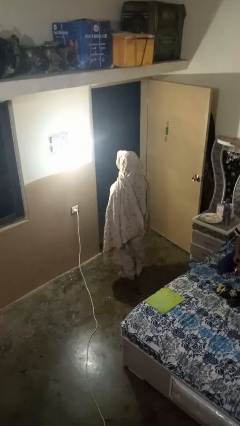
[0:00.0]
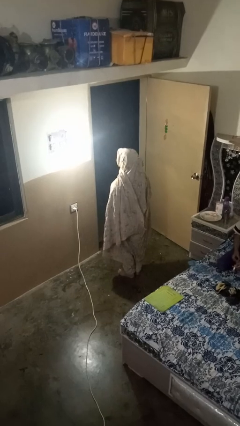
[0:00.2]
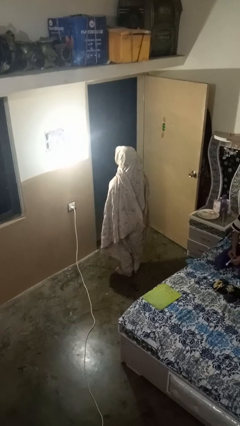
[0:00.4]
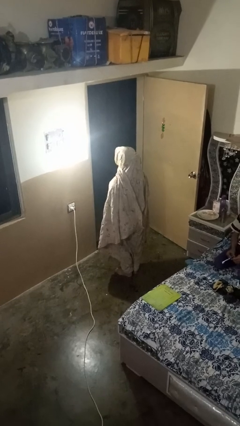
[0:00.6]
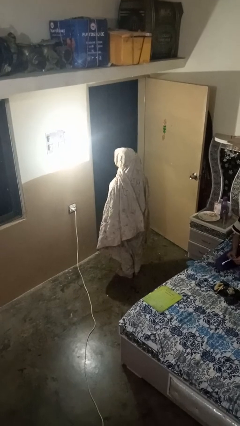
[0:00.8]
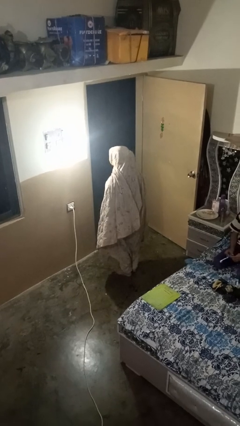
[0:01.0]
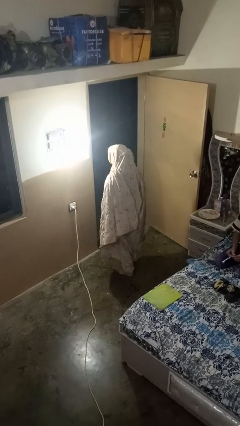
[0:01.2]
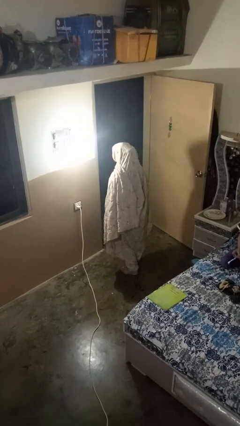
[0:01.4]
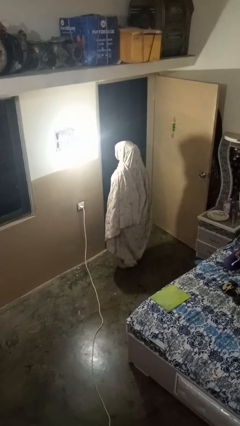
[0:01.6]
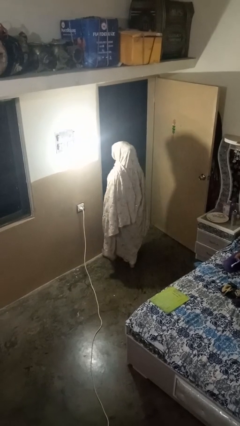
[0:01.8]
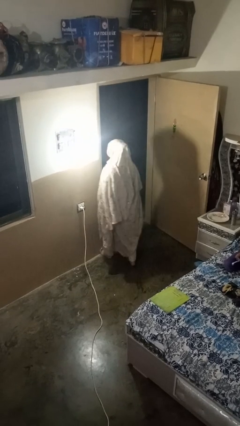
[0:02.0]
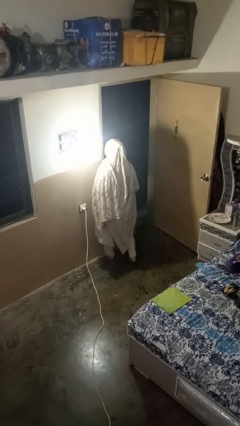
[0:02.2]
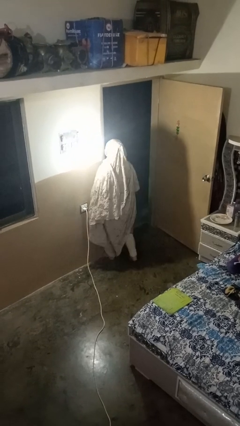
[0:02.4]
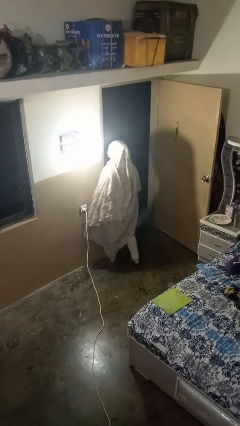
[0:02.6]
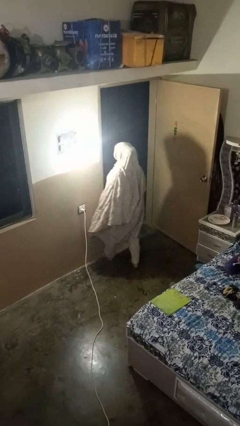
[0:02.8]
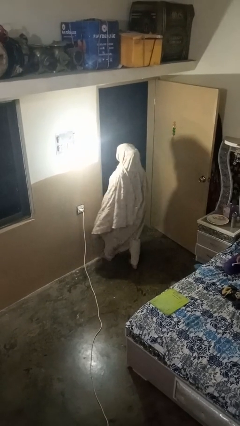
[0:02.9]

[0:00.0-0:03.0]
person bumps into wall

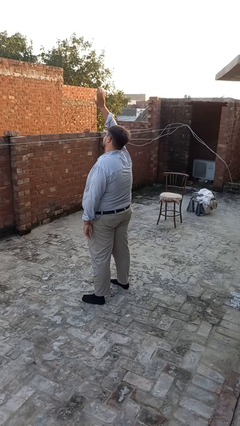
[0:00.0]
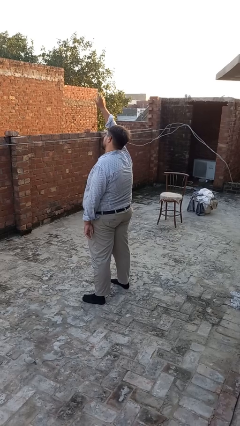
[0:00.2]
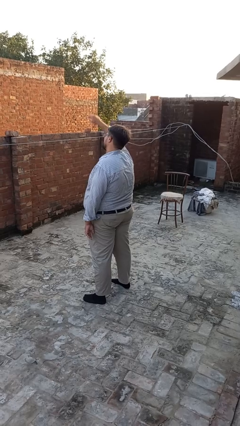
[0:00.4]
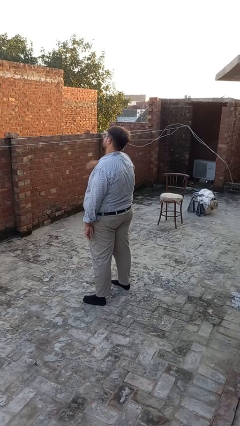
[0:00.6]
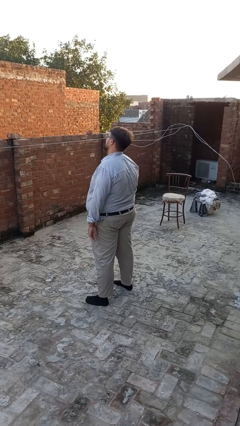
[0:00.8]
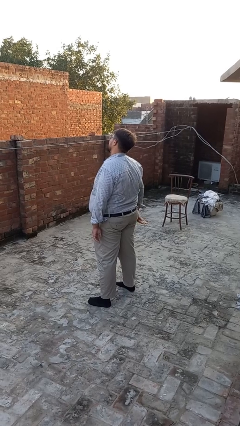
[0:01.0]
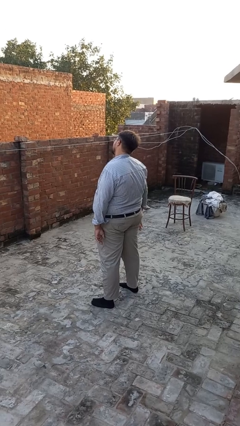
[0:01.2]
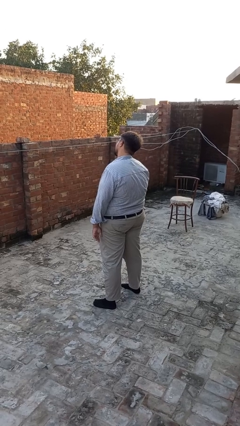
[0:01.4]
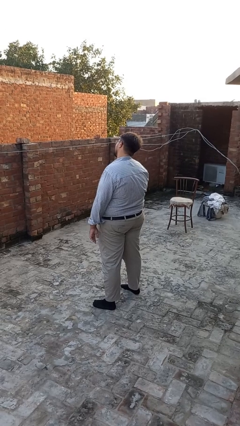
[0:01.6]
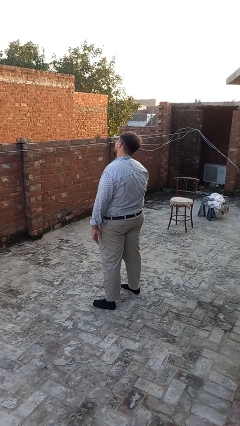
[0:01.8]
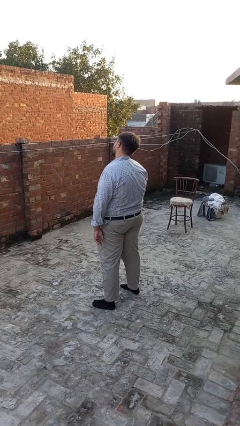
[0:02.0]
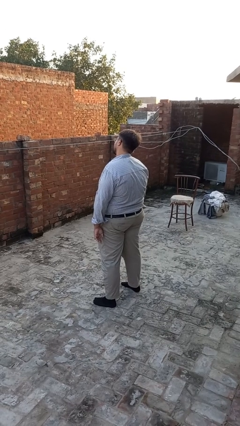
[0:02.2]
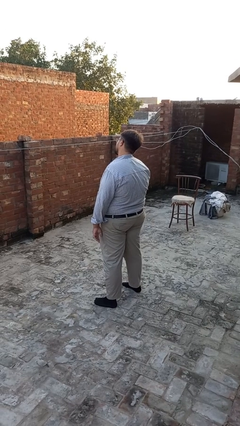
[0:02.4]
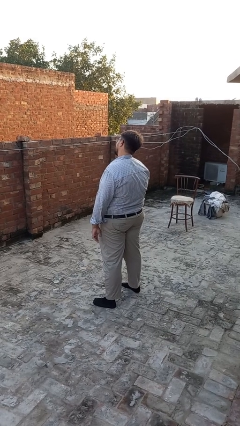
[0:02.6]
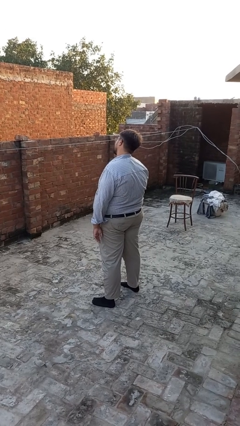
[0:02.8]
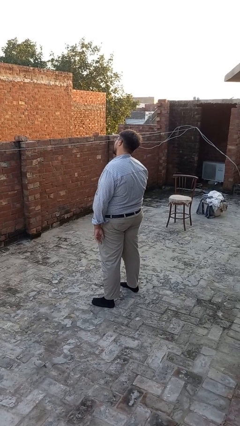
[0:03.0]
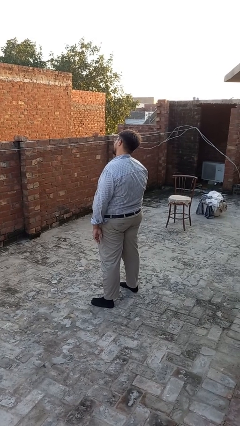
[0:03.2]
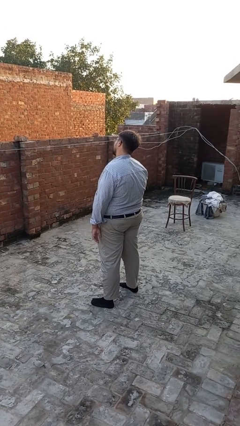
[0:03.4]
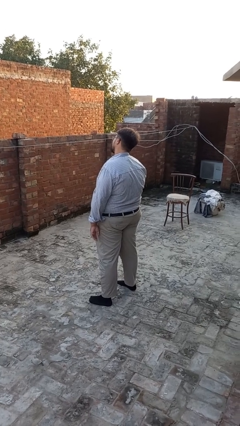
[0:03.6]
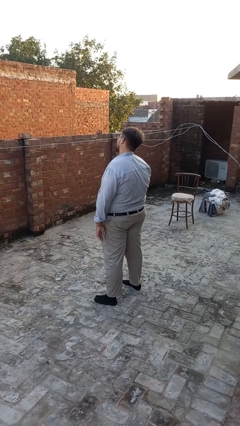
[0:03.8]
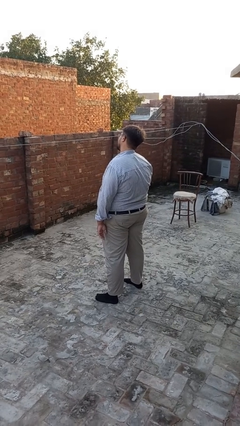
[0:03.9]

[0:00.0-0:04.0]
person gestures lower hand

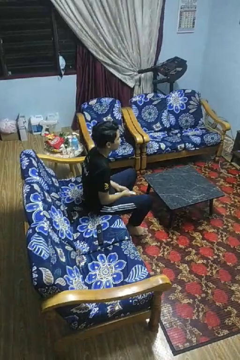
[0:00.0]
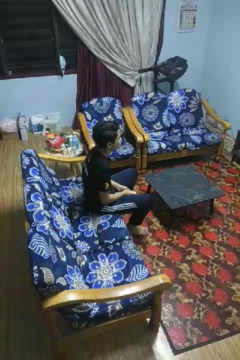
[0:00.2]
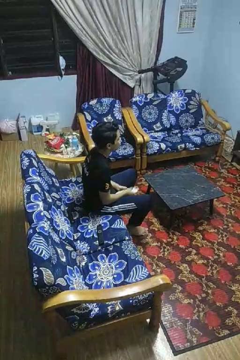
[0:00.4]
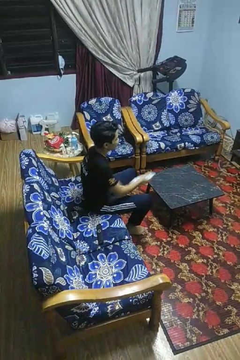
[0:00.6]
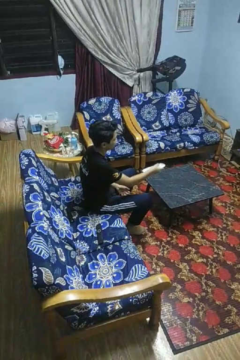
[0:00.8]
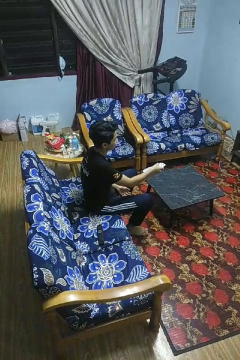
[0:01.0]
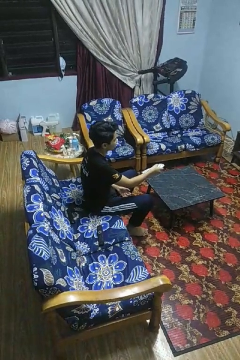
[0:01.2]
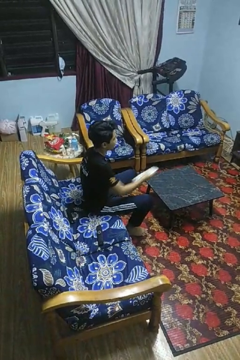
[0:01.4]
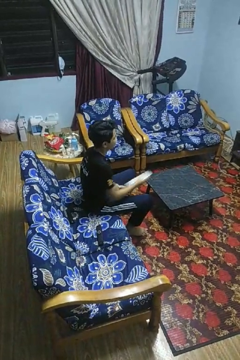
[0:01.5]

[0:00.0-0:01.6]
person uses television remote

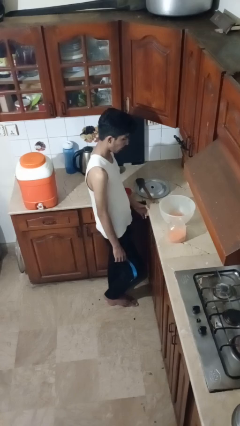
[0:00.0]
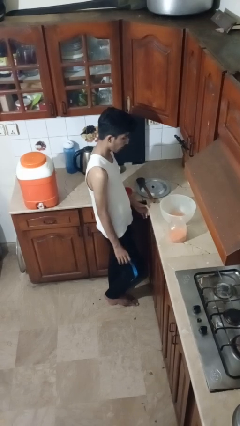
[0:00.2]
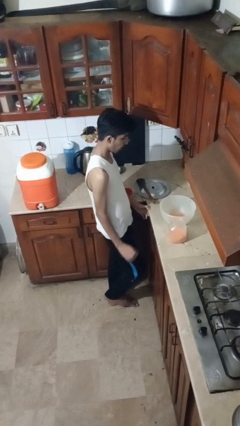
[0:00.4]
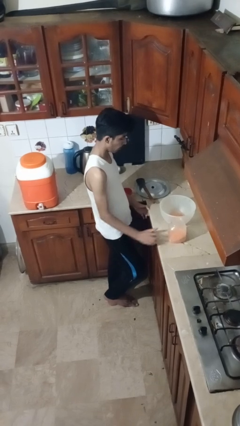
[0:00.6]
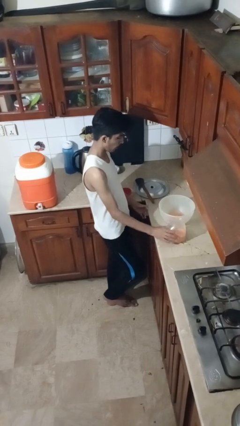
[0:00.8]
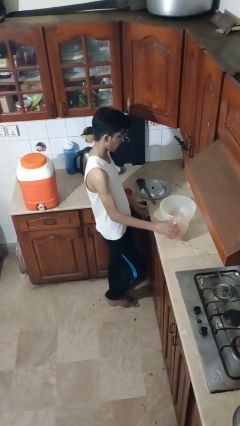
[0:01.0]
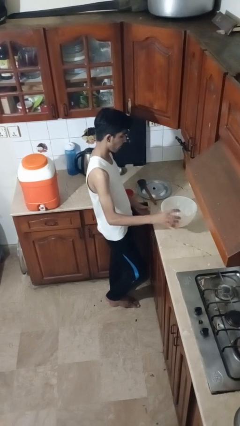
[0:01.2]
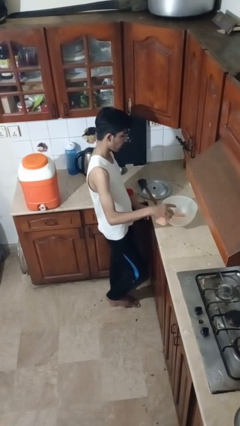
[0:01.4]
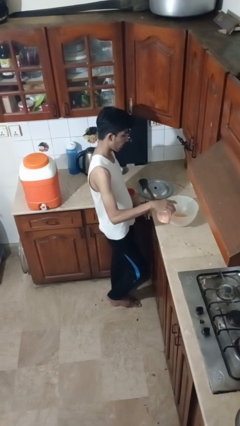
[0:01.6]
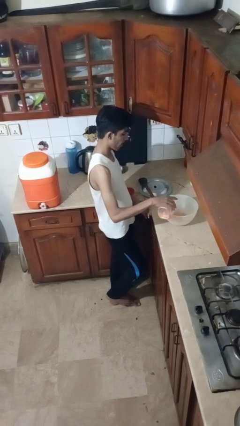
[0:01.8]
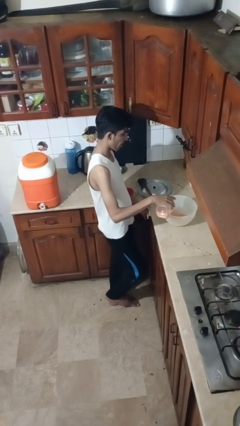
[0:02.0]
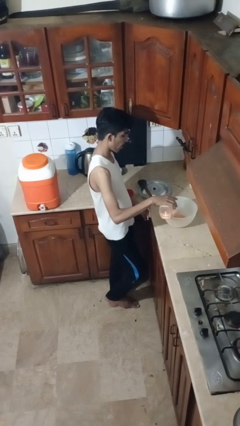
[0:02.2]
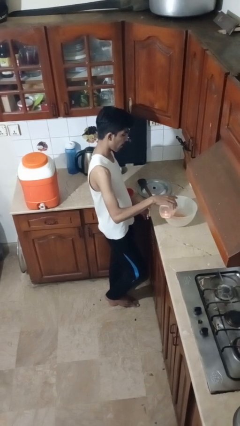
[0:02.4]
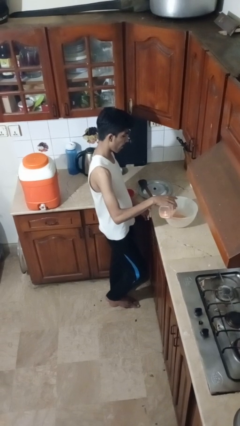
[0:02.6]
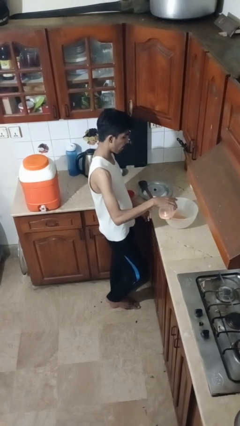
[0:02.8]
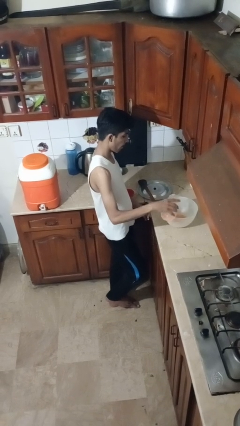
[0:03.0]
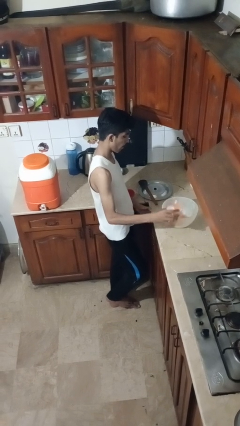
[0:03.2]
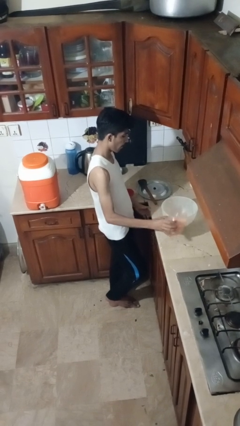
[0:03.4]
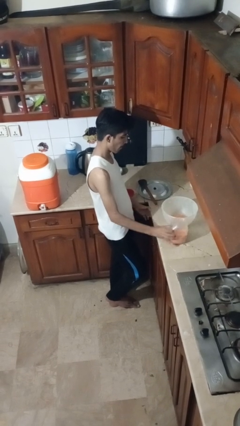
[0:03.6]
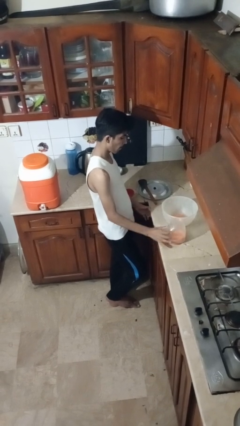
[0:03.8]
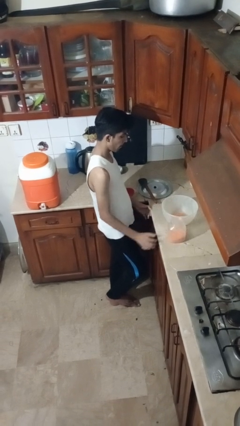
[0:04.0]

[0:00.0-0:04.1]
person pours into bowl

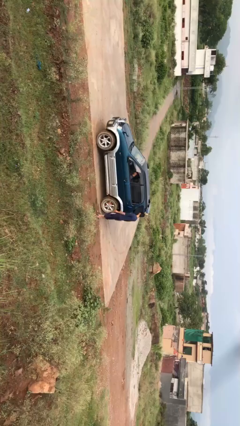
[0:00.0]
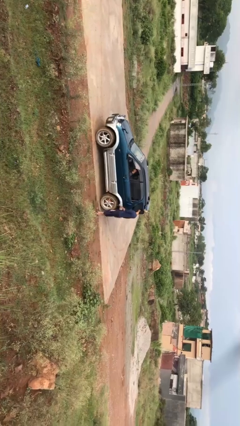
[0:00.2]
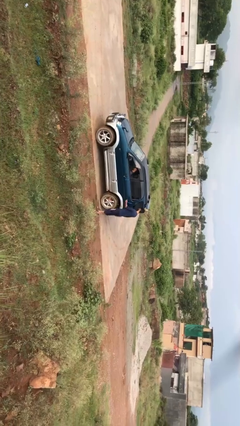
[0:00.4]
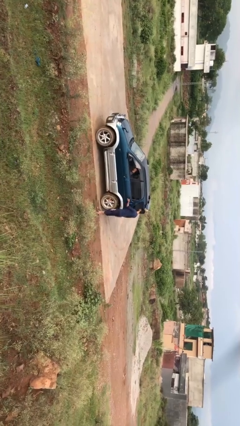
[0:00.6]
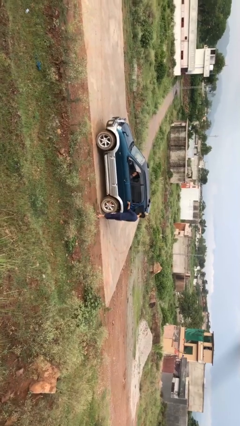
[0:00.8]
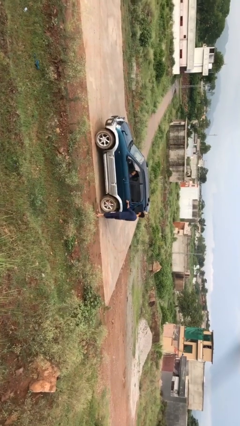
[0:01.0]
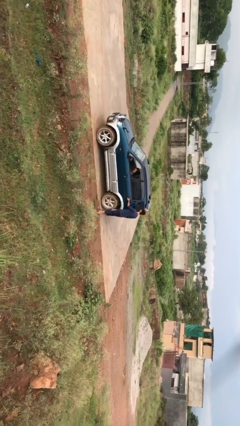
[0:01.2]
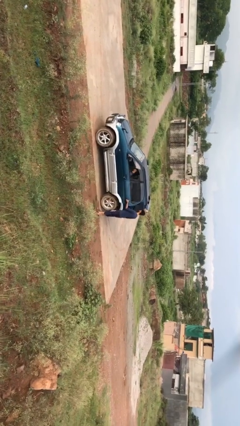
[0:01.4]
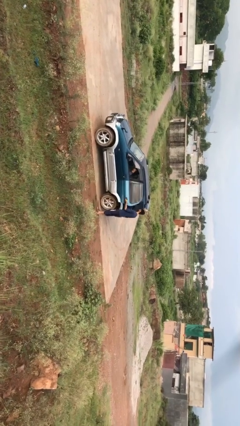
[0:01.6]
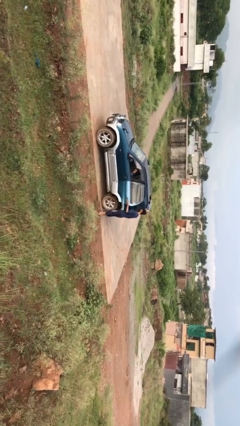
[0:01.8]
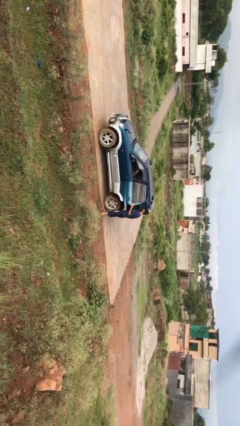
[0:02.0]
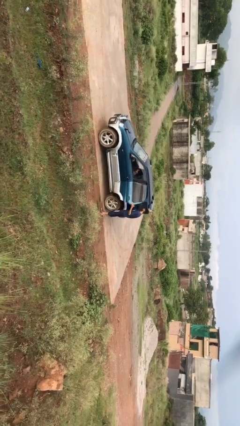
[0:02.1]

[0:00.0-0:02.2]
person opens car door

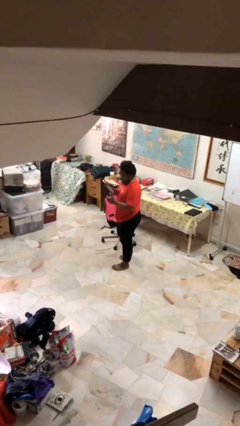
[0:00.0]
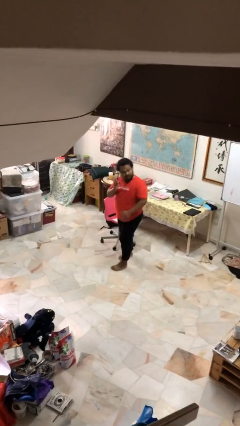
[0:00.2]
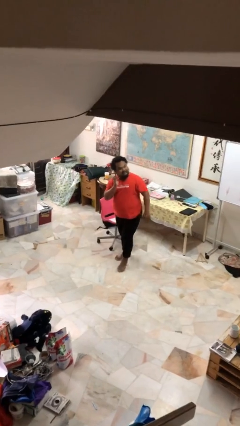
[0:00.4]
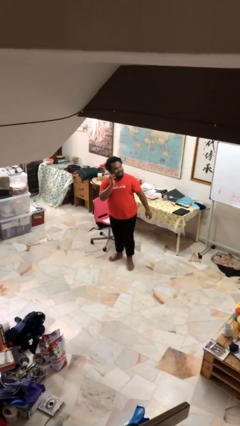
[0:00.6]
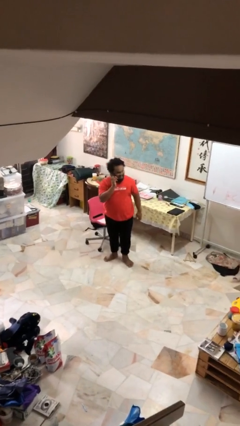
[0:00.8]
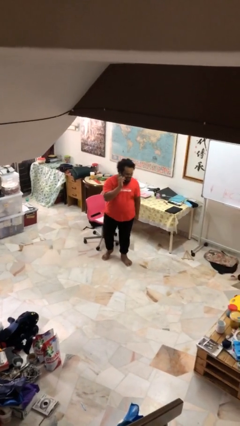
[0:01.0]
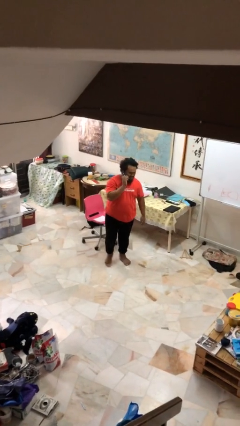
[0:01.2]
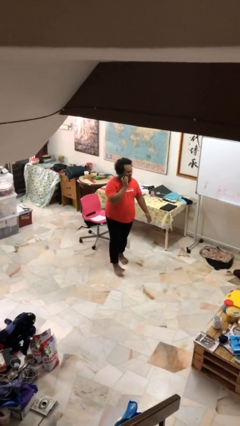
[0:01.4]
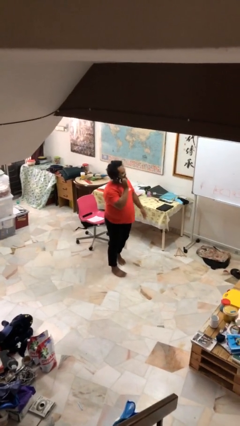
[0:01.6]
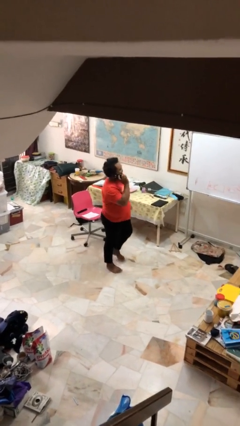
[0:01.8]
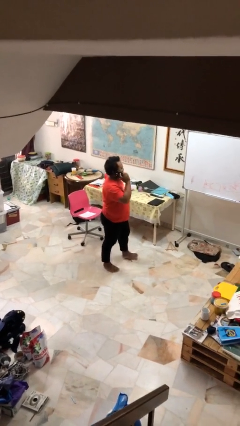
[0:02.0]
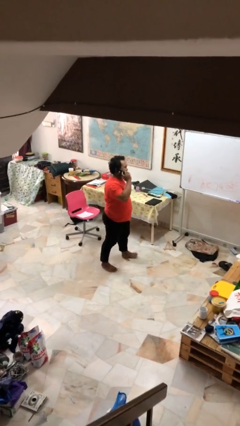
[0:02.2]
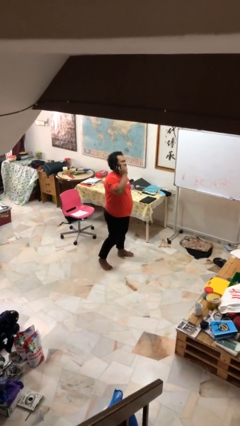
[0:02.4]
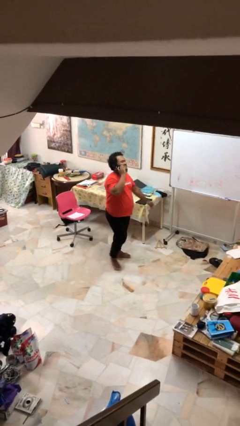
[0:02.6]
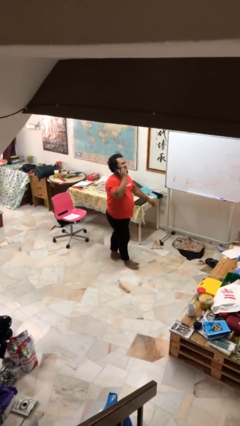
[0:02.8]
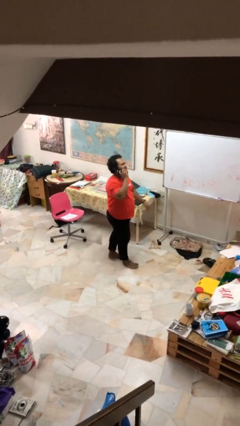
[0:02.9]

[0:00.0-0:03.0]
person talks on phone
